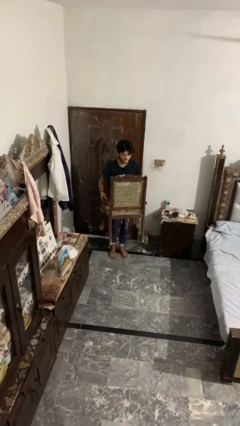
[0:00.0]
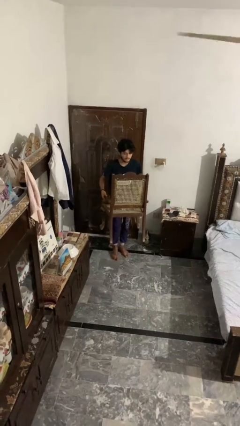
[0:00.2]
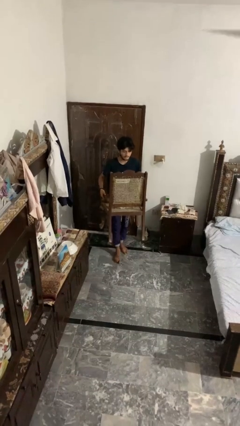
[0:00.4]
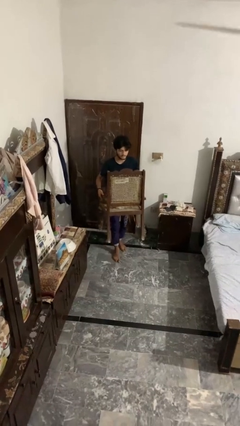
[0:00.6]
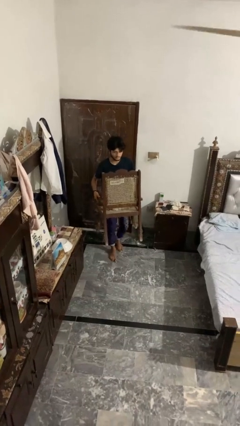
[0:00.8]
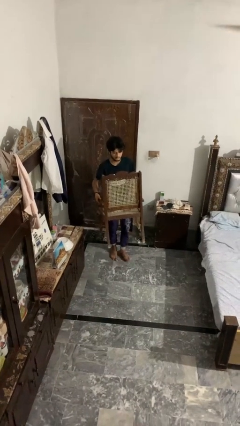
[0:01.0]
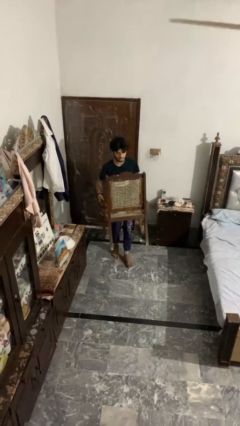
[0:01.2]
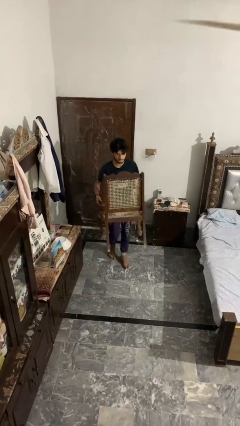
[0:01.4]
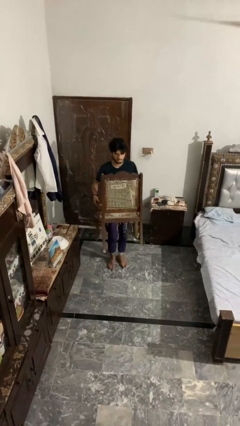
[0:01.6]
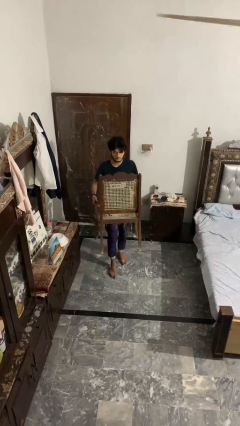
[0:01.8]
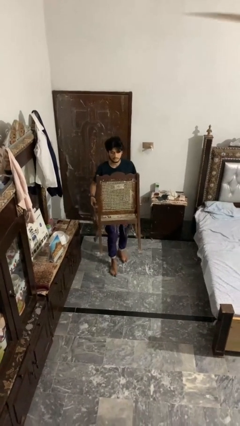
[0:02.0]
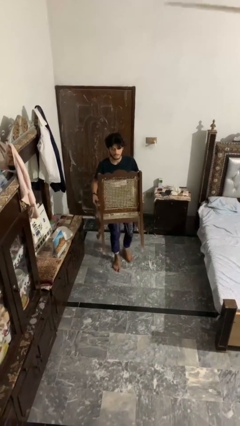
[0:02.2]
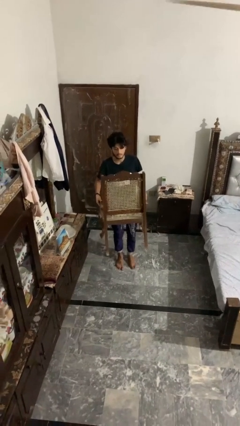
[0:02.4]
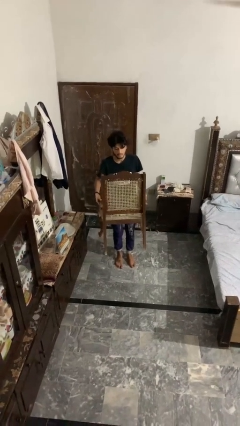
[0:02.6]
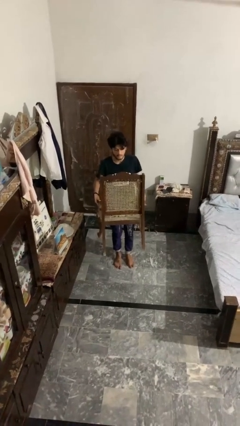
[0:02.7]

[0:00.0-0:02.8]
person carries furniture

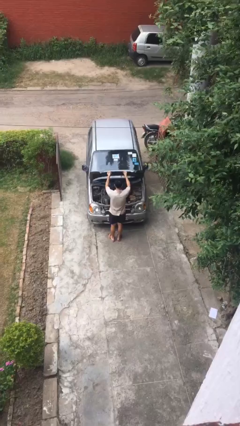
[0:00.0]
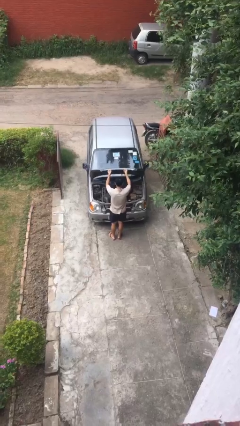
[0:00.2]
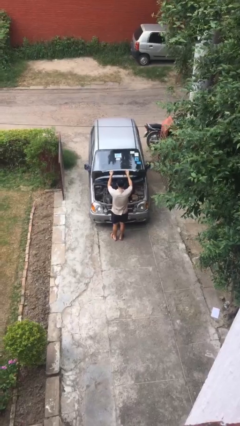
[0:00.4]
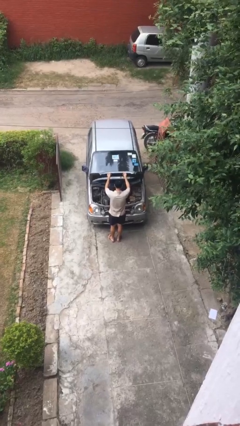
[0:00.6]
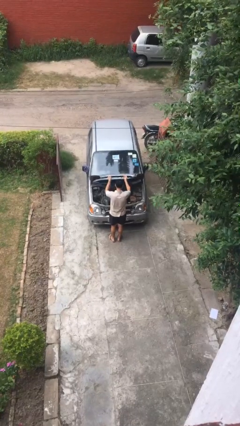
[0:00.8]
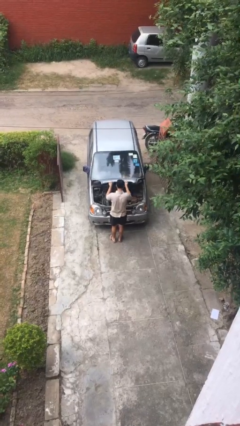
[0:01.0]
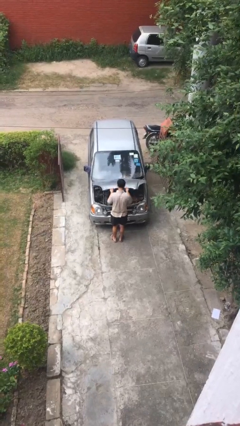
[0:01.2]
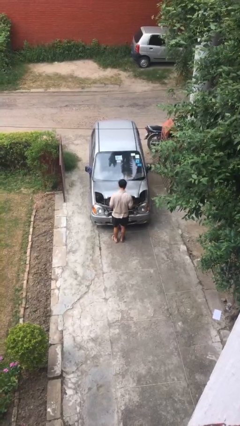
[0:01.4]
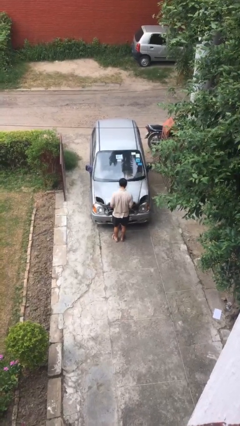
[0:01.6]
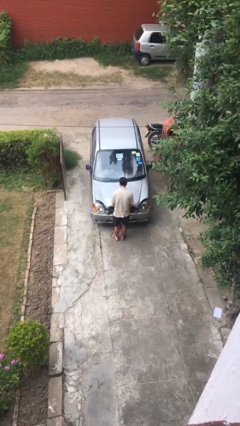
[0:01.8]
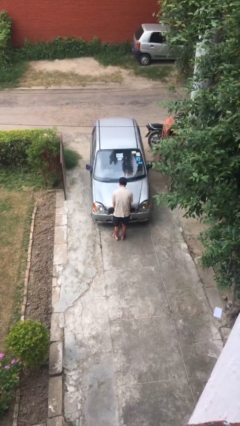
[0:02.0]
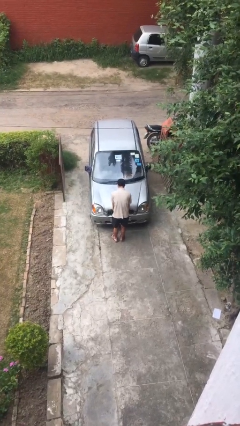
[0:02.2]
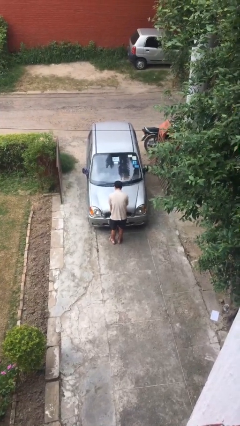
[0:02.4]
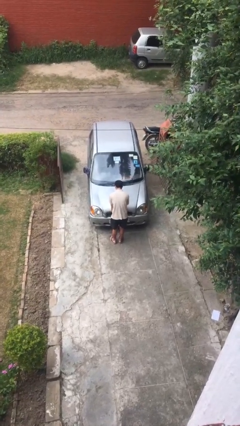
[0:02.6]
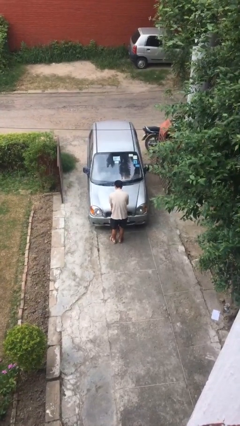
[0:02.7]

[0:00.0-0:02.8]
person closes car hood

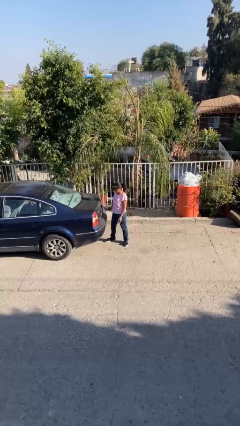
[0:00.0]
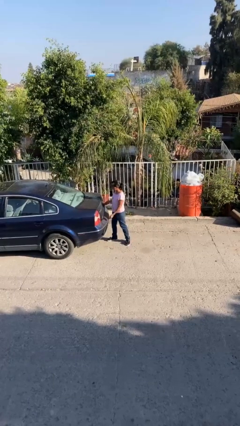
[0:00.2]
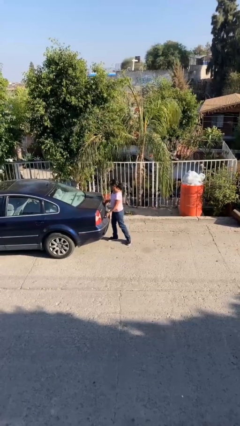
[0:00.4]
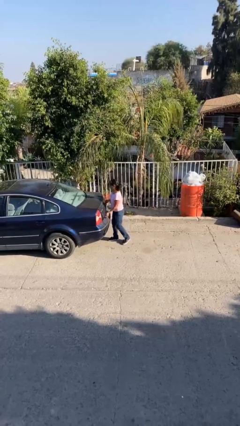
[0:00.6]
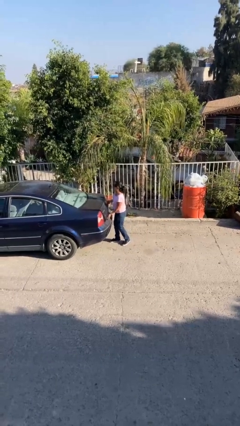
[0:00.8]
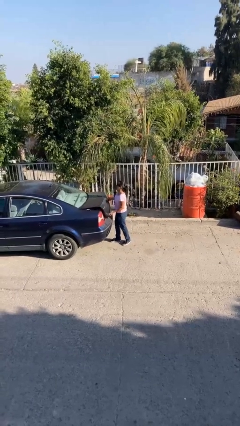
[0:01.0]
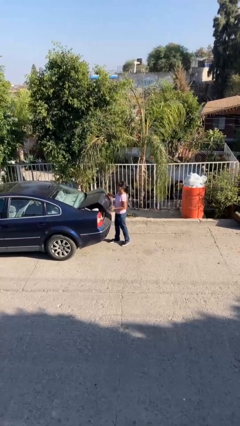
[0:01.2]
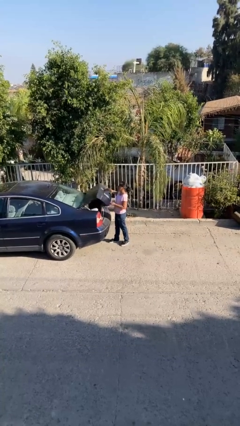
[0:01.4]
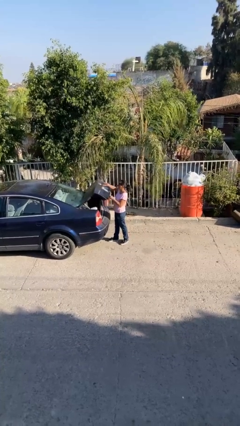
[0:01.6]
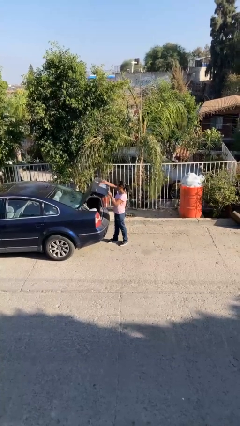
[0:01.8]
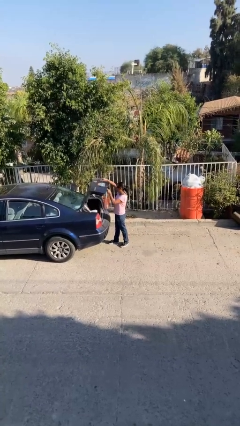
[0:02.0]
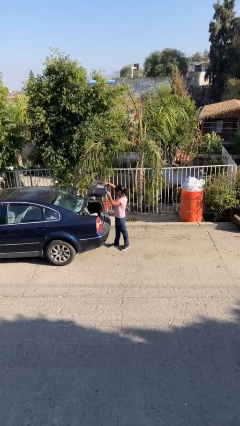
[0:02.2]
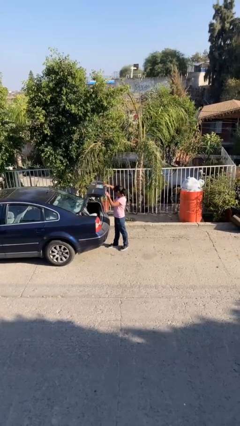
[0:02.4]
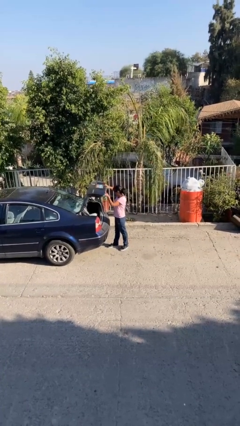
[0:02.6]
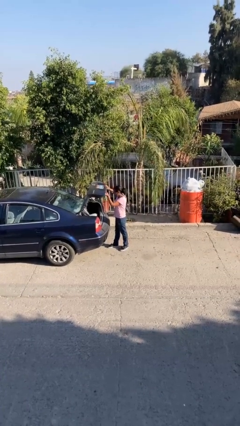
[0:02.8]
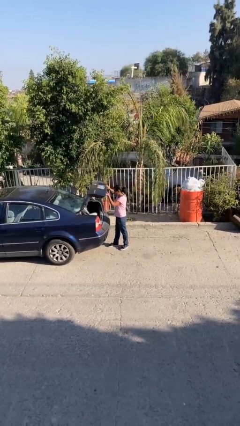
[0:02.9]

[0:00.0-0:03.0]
person opens car trunk

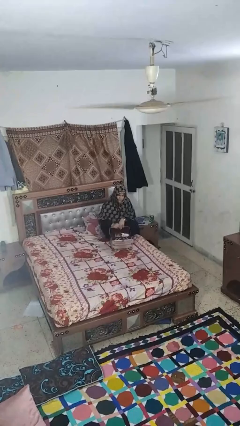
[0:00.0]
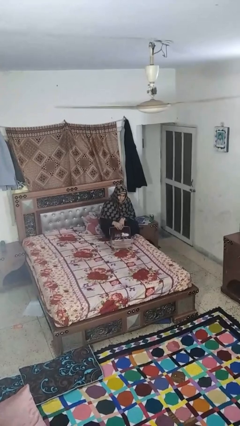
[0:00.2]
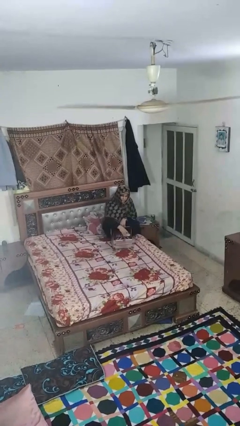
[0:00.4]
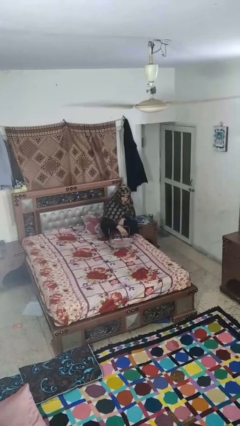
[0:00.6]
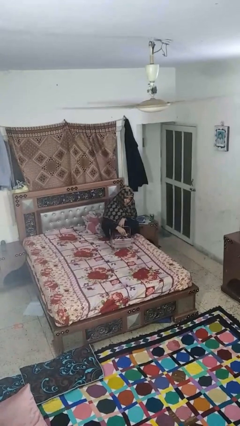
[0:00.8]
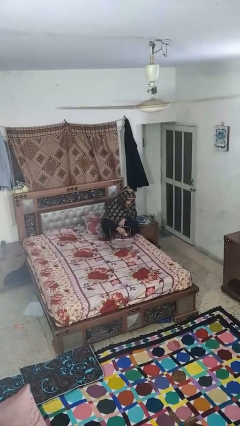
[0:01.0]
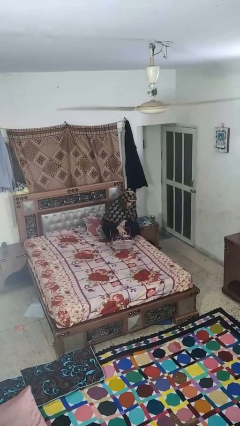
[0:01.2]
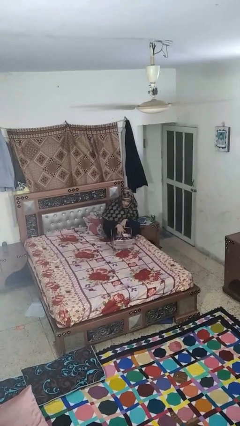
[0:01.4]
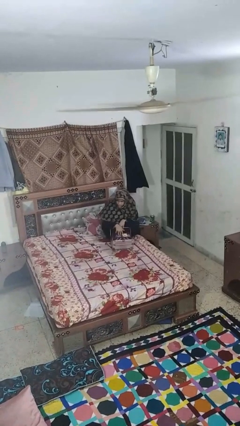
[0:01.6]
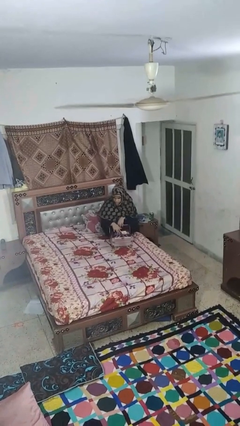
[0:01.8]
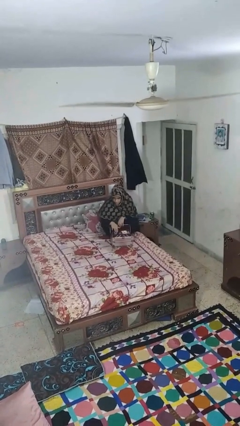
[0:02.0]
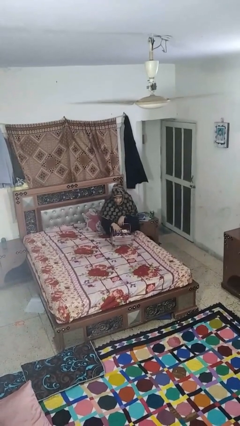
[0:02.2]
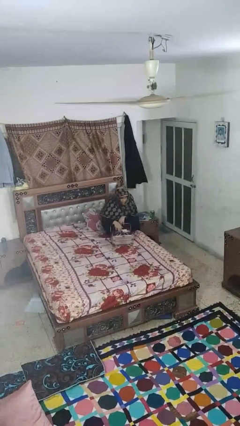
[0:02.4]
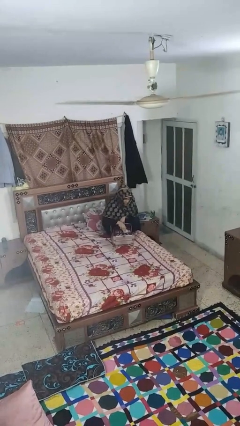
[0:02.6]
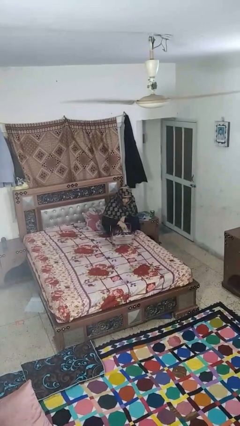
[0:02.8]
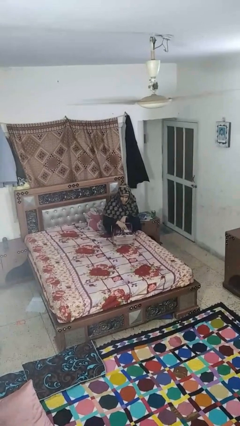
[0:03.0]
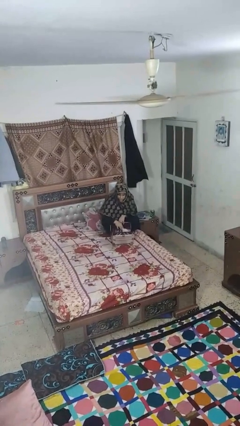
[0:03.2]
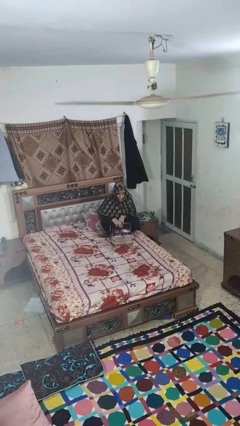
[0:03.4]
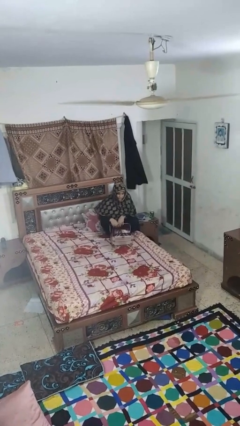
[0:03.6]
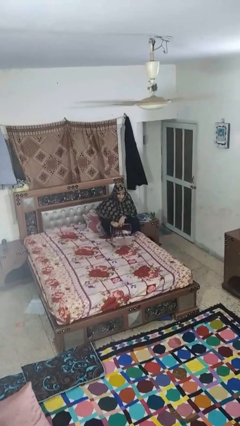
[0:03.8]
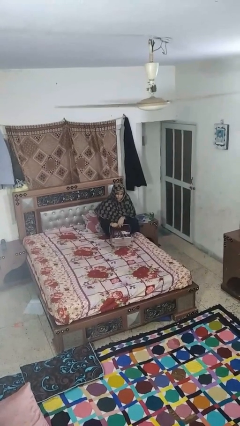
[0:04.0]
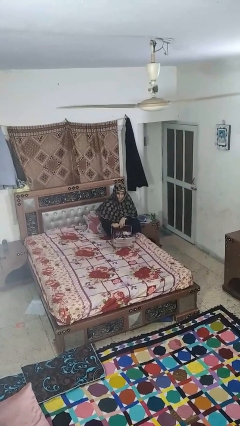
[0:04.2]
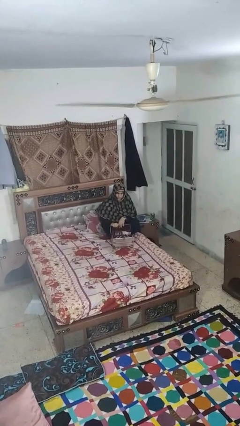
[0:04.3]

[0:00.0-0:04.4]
person searches jewelry box

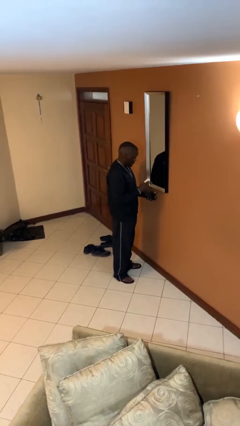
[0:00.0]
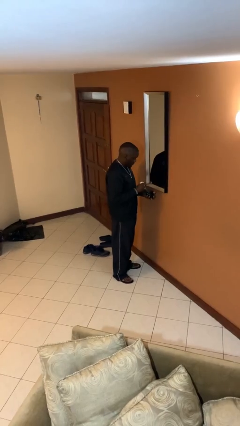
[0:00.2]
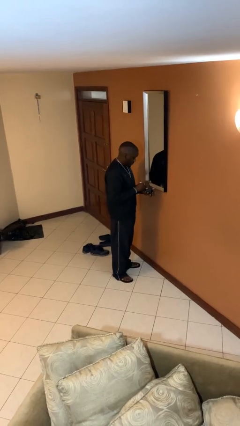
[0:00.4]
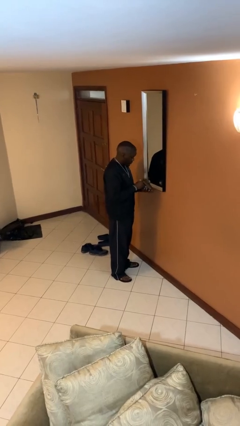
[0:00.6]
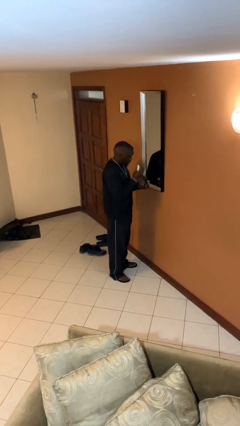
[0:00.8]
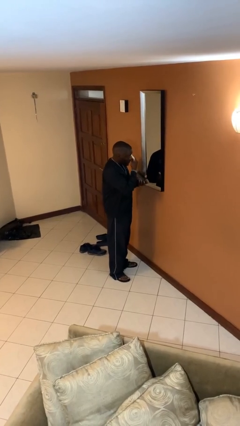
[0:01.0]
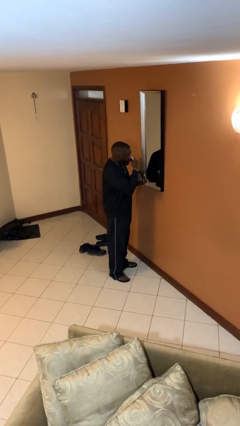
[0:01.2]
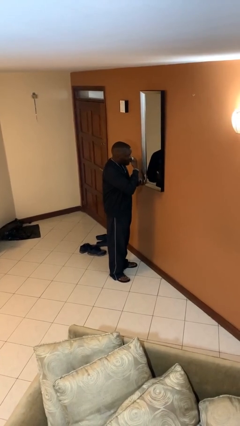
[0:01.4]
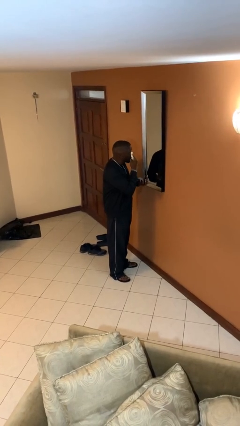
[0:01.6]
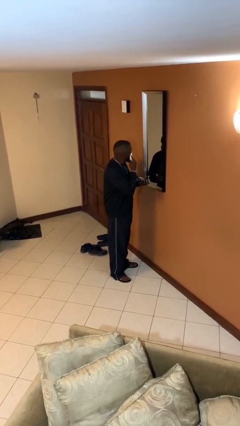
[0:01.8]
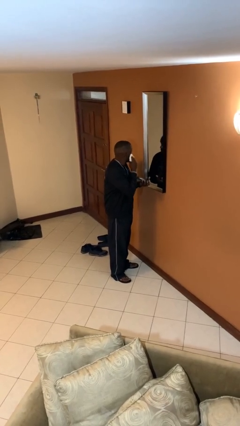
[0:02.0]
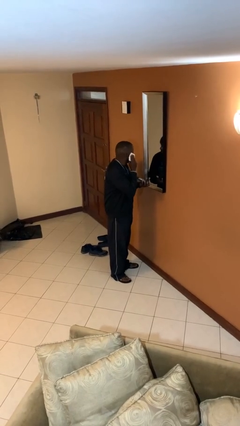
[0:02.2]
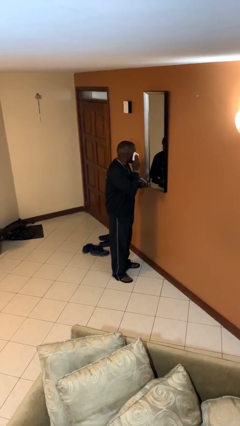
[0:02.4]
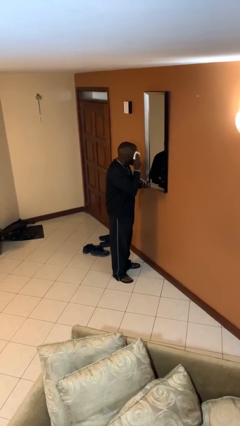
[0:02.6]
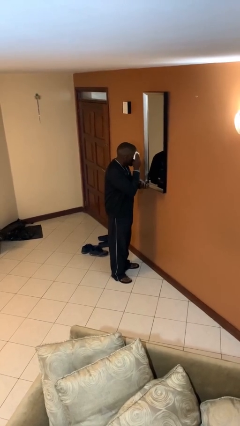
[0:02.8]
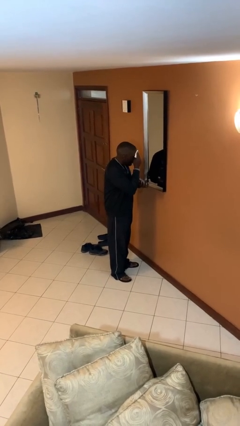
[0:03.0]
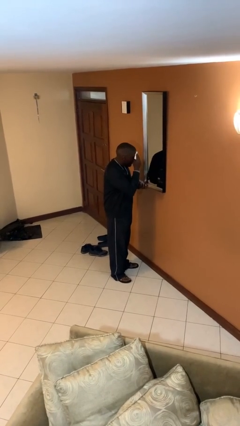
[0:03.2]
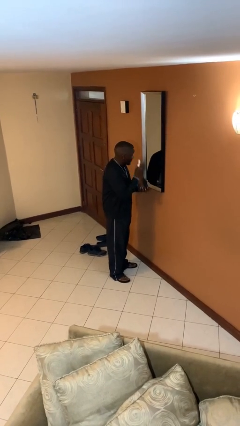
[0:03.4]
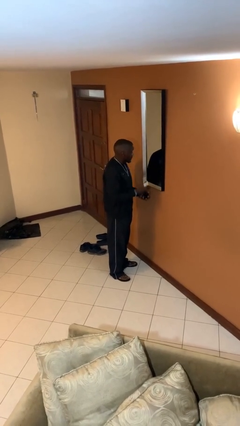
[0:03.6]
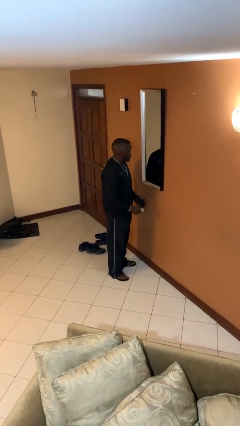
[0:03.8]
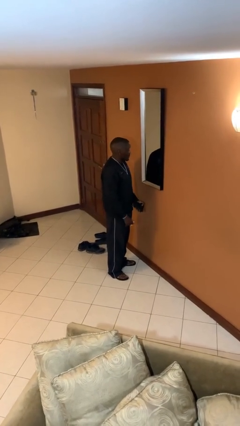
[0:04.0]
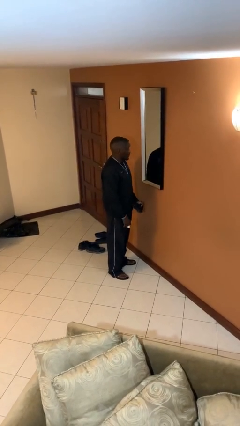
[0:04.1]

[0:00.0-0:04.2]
person applies foundation makeup

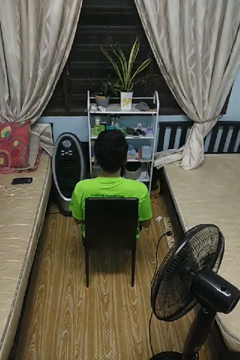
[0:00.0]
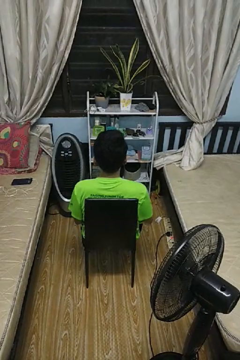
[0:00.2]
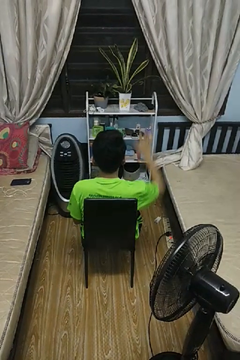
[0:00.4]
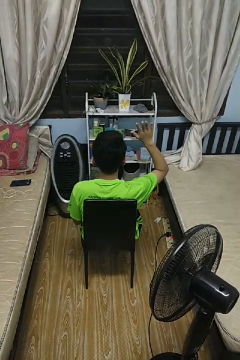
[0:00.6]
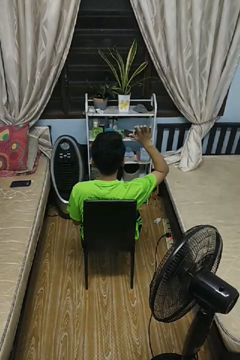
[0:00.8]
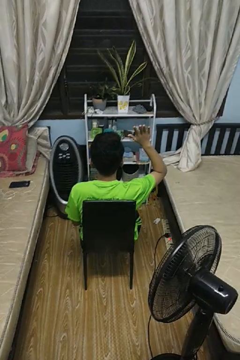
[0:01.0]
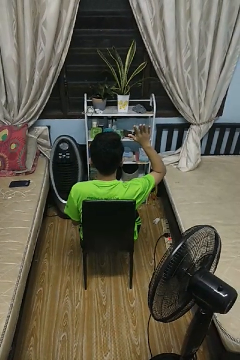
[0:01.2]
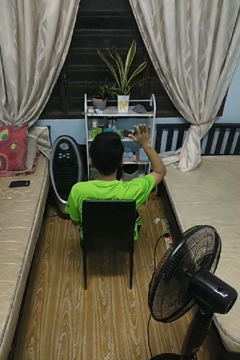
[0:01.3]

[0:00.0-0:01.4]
person gestures number five
